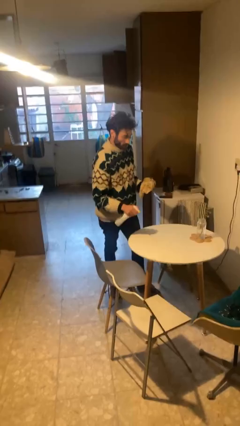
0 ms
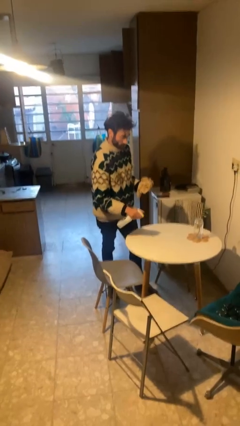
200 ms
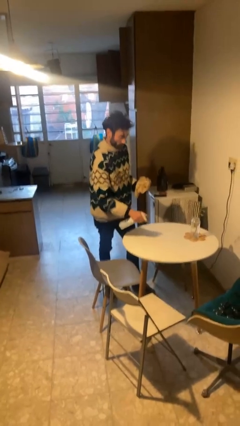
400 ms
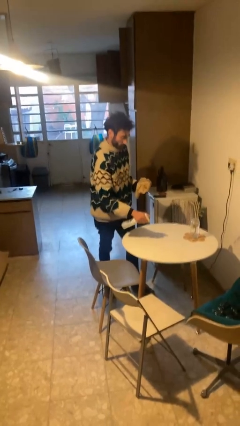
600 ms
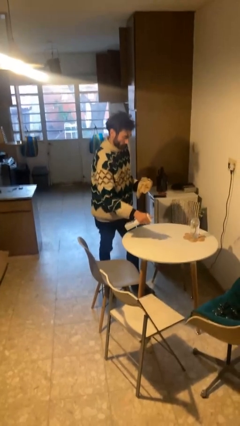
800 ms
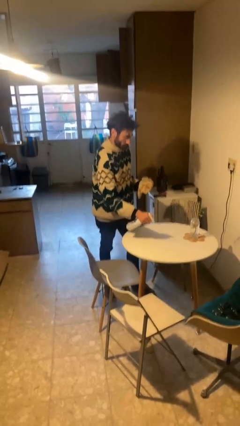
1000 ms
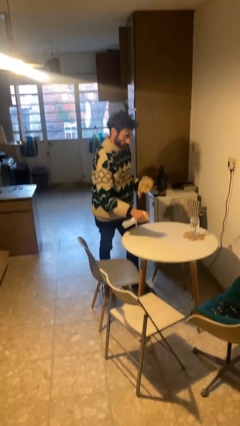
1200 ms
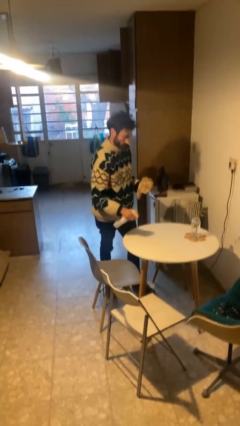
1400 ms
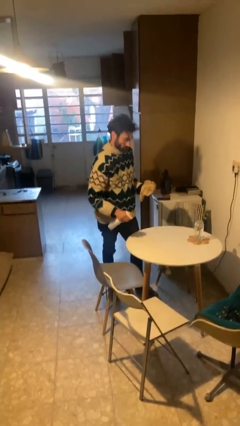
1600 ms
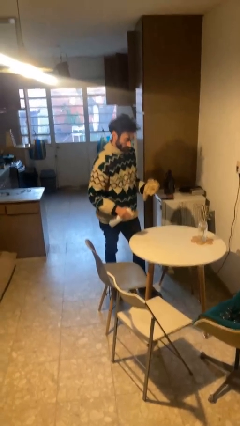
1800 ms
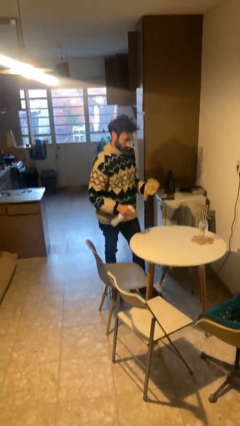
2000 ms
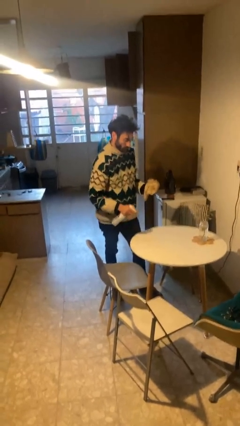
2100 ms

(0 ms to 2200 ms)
person sprays from bottle

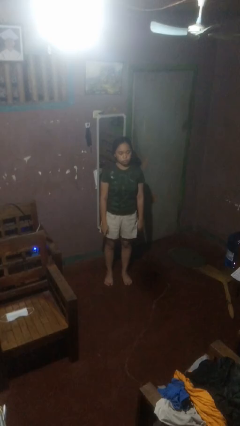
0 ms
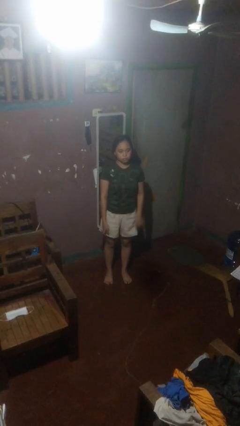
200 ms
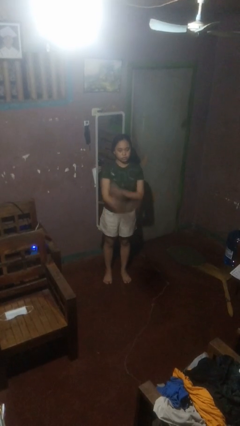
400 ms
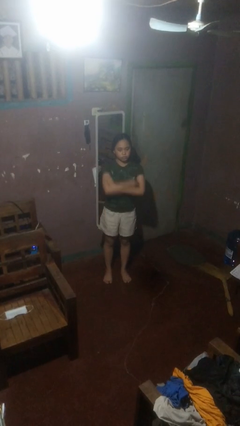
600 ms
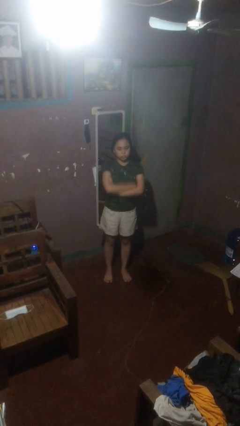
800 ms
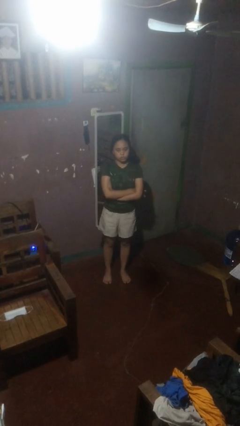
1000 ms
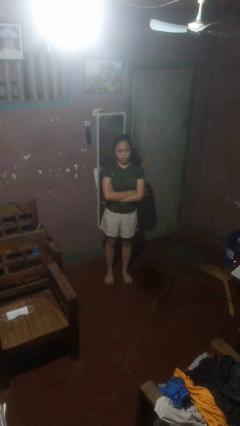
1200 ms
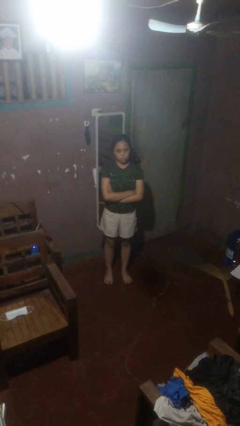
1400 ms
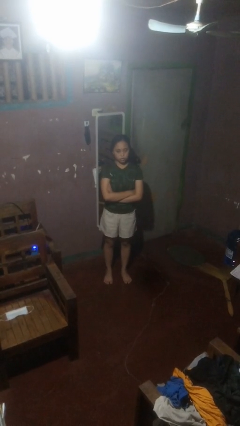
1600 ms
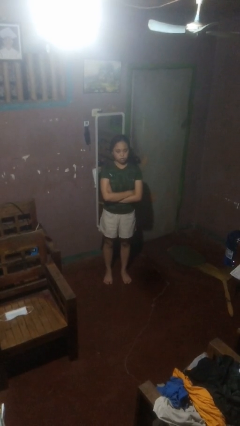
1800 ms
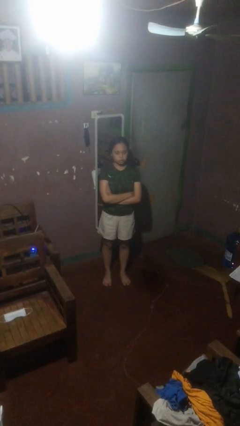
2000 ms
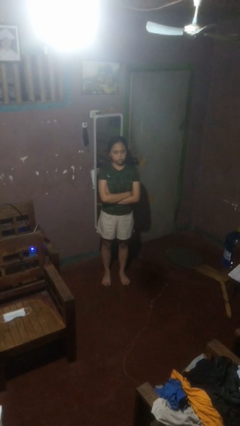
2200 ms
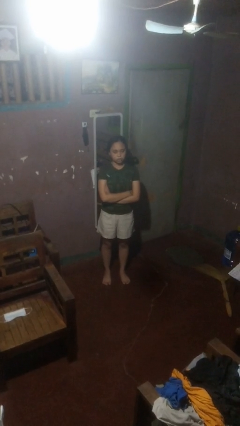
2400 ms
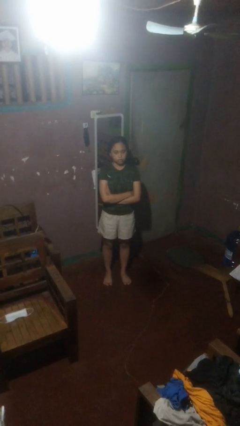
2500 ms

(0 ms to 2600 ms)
person crosses arms

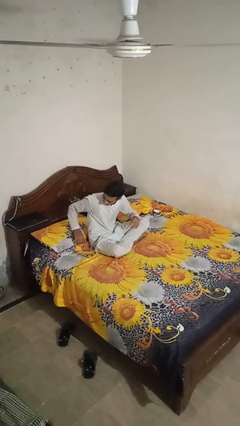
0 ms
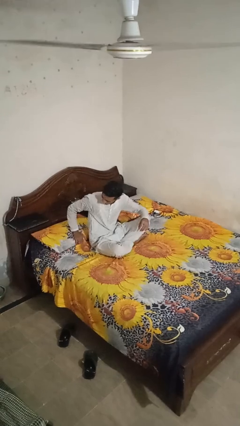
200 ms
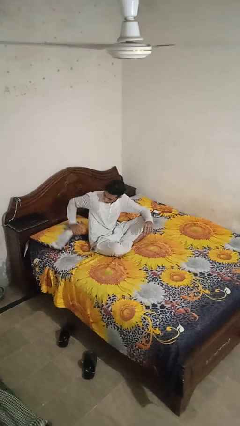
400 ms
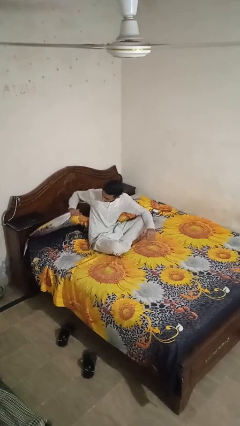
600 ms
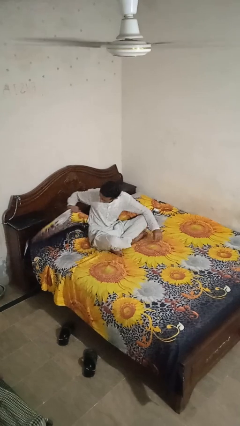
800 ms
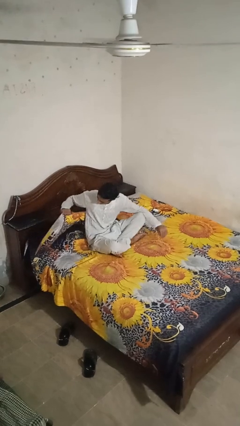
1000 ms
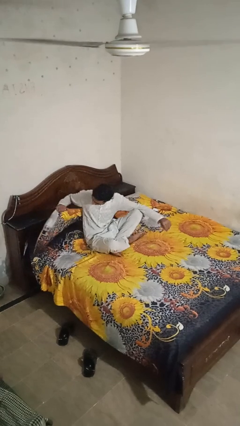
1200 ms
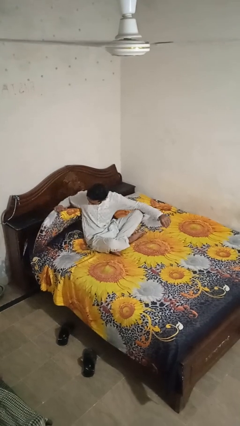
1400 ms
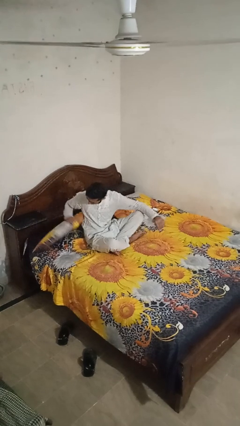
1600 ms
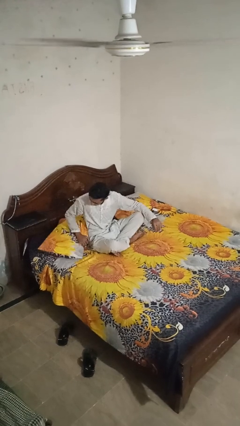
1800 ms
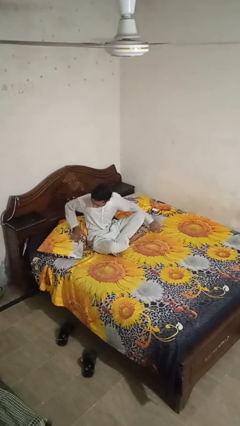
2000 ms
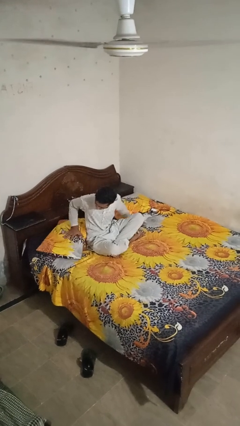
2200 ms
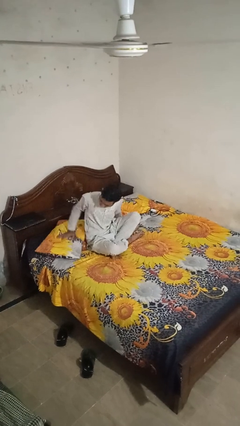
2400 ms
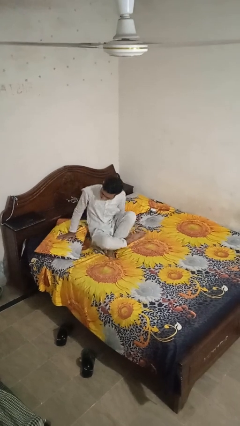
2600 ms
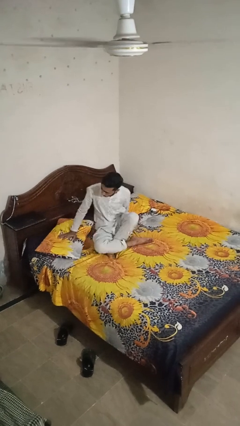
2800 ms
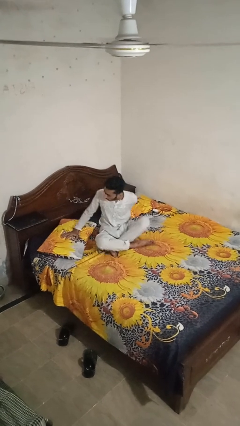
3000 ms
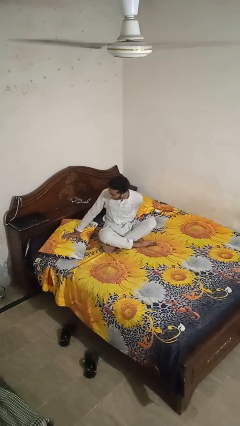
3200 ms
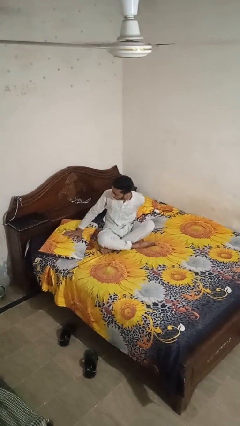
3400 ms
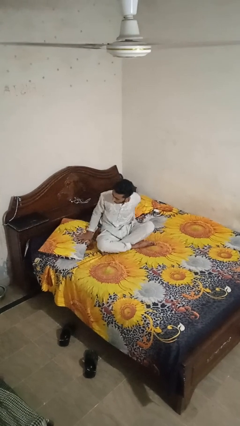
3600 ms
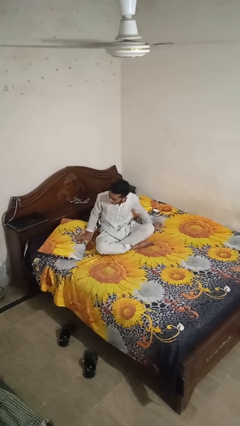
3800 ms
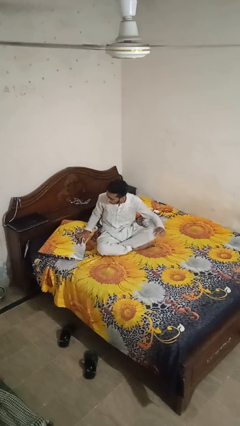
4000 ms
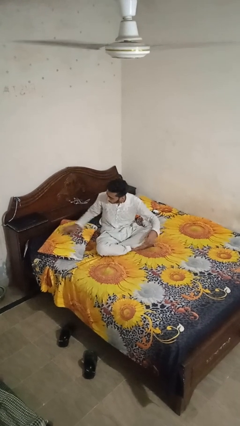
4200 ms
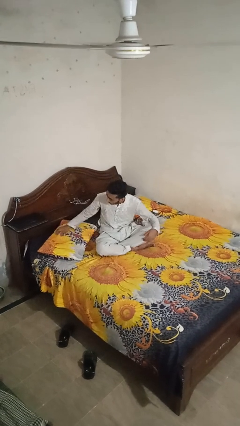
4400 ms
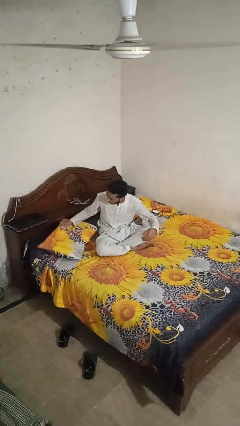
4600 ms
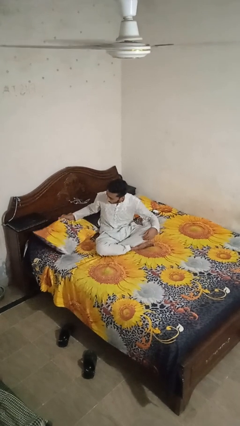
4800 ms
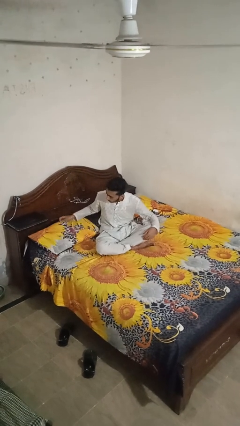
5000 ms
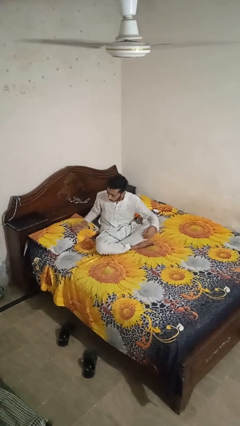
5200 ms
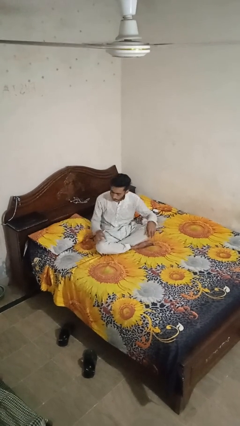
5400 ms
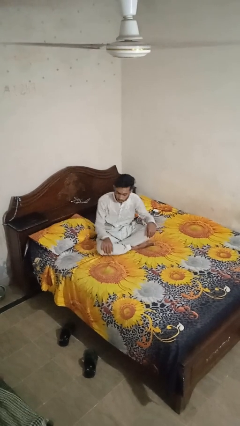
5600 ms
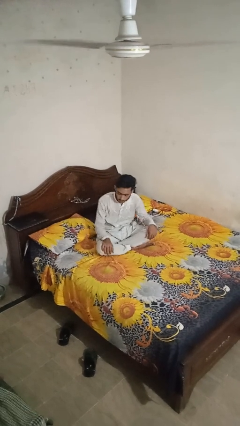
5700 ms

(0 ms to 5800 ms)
person searches under bed

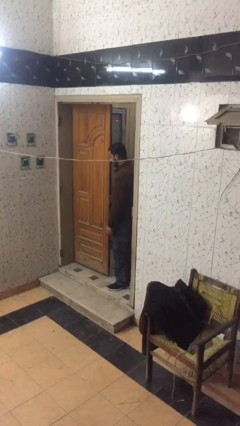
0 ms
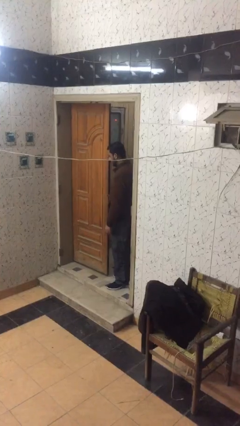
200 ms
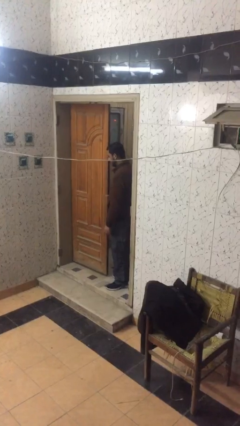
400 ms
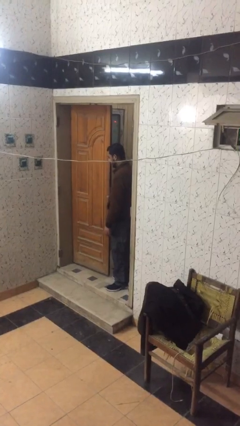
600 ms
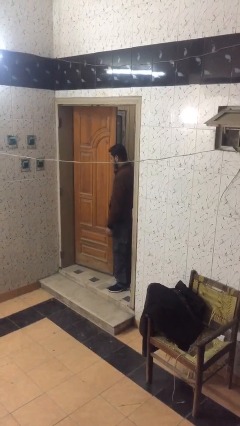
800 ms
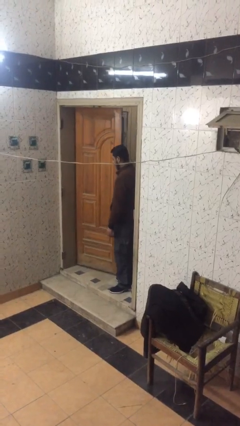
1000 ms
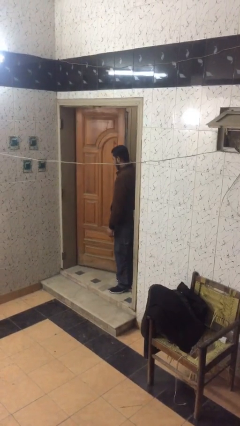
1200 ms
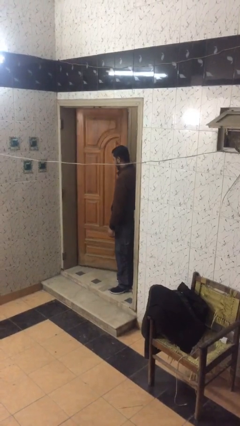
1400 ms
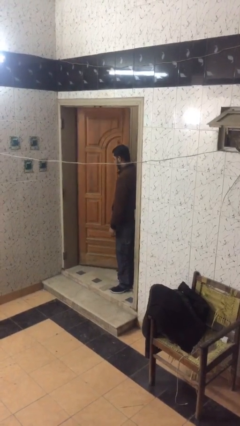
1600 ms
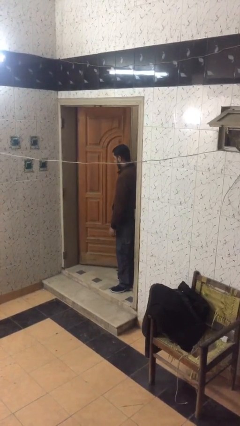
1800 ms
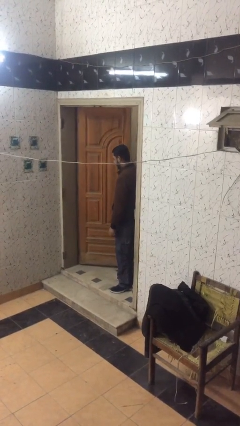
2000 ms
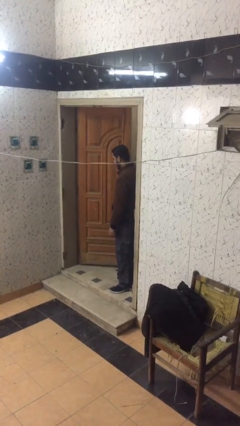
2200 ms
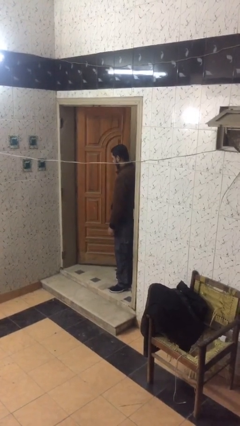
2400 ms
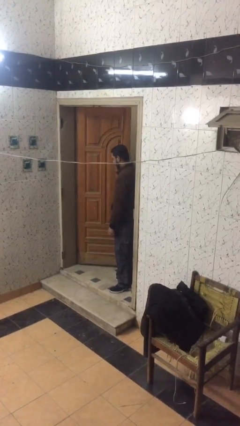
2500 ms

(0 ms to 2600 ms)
person opens facility door

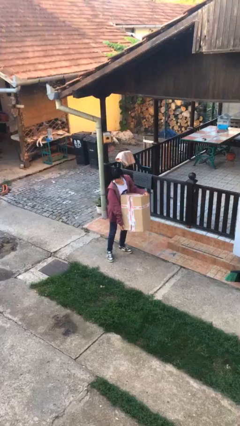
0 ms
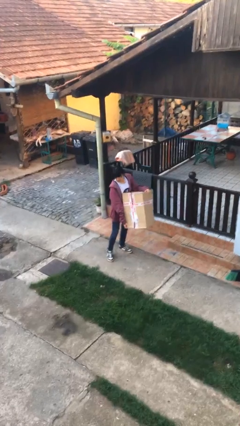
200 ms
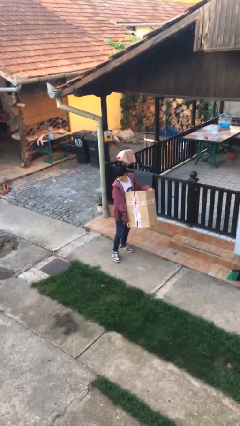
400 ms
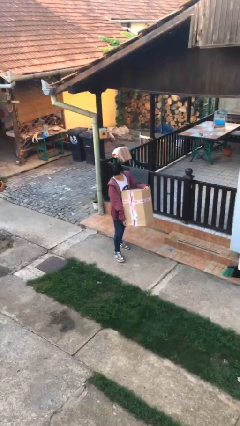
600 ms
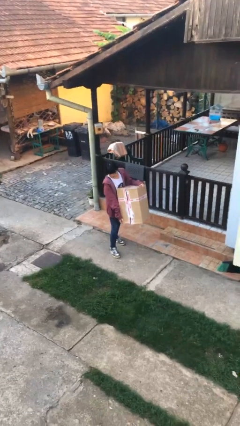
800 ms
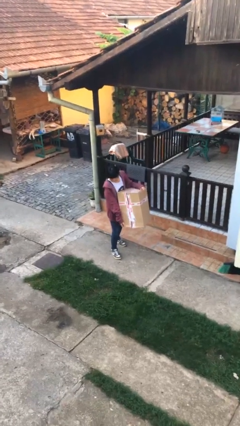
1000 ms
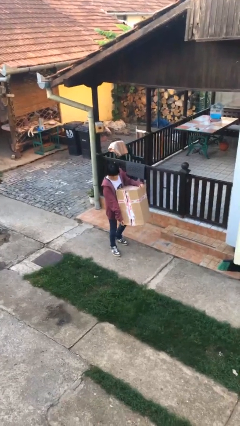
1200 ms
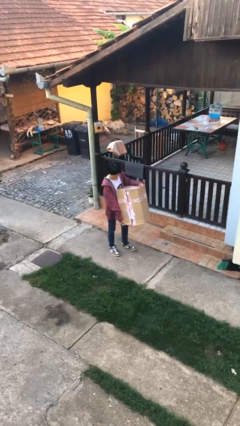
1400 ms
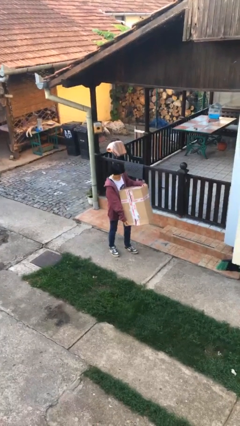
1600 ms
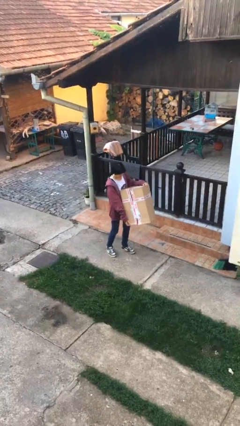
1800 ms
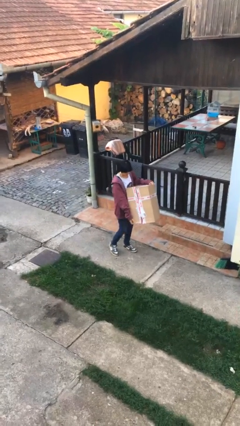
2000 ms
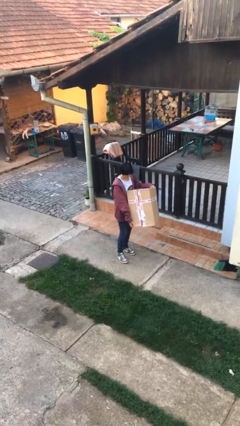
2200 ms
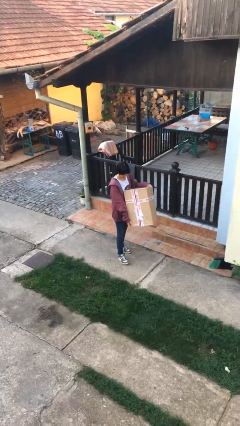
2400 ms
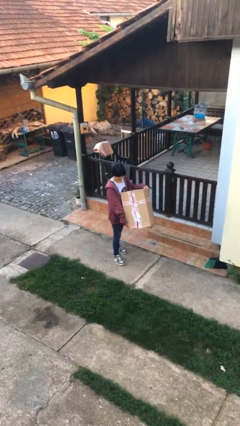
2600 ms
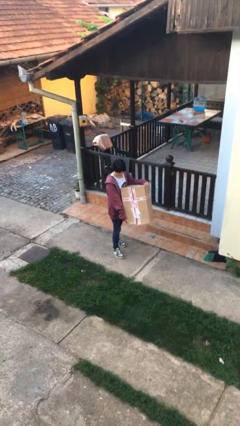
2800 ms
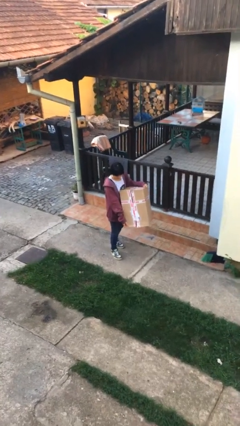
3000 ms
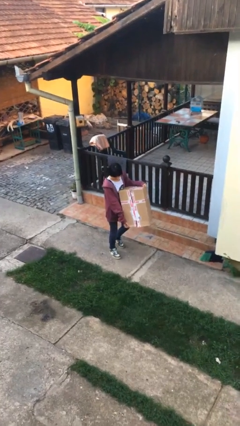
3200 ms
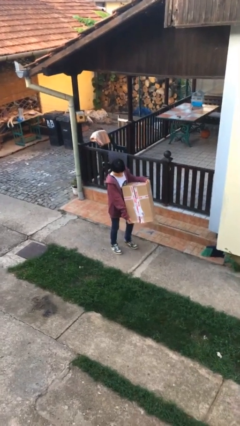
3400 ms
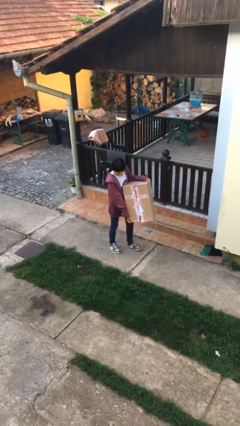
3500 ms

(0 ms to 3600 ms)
person carries heavy object

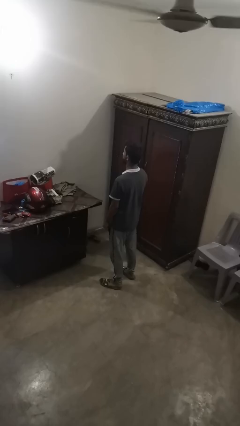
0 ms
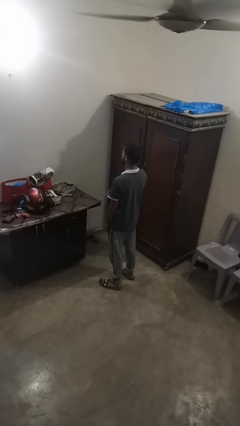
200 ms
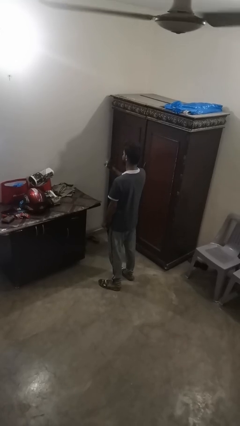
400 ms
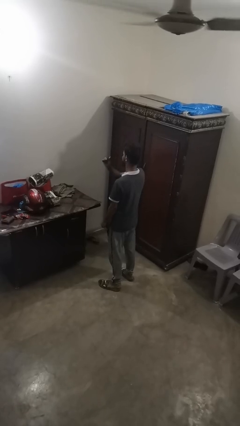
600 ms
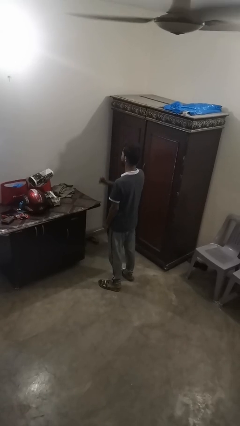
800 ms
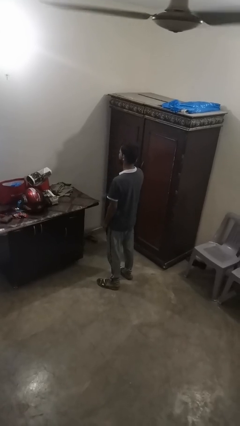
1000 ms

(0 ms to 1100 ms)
person snaps fingers
